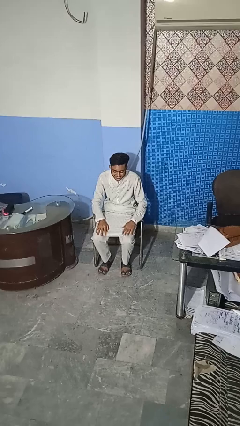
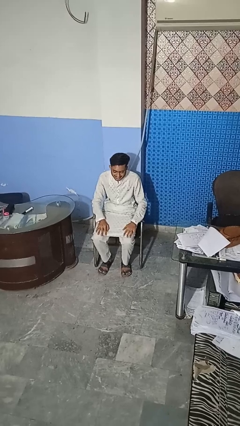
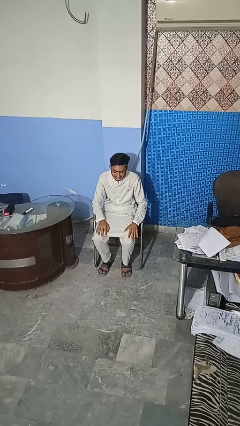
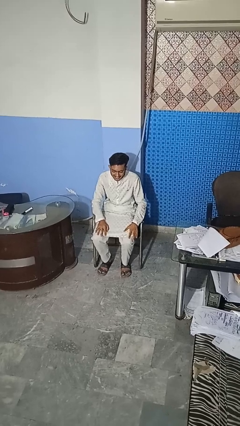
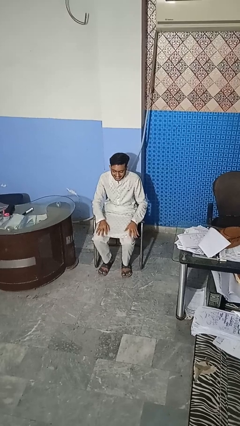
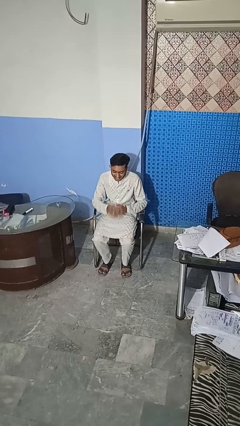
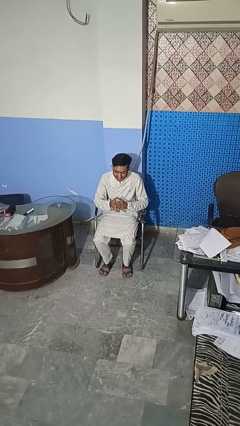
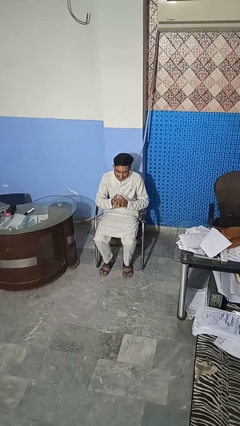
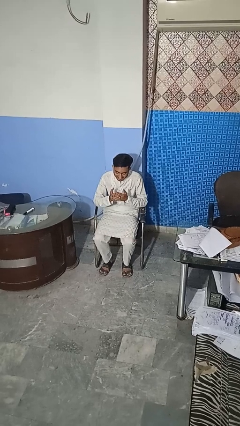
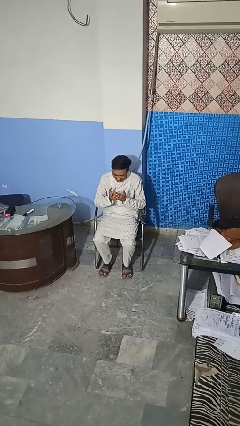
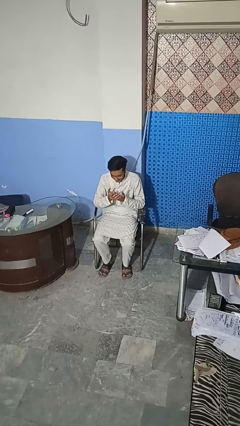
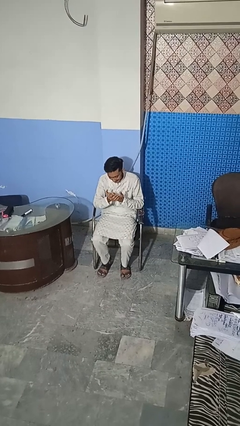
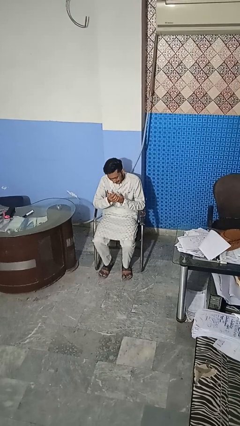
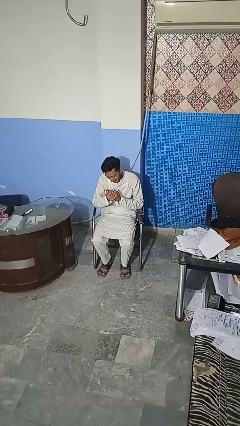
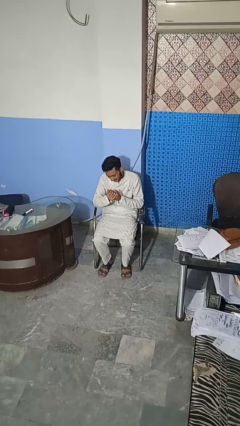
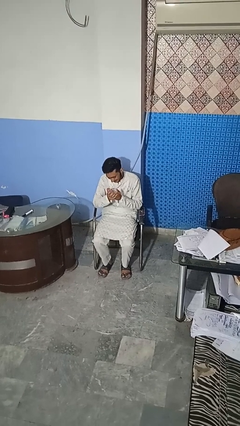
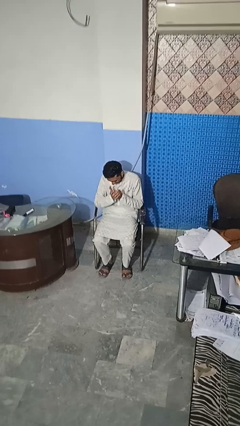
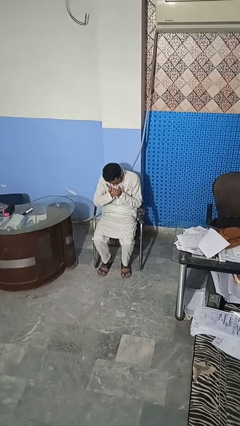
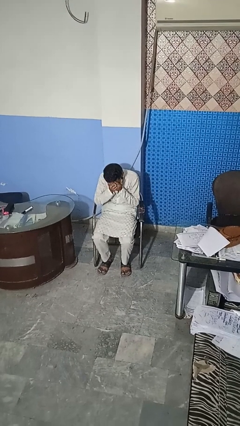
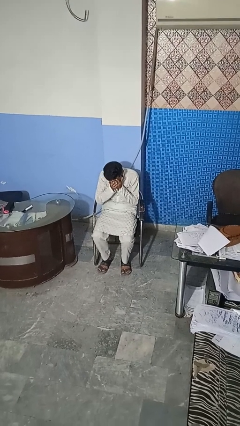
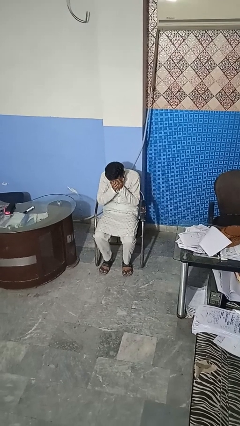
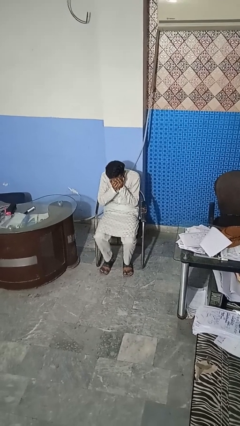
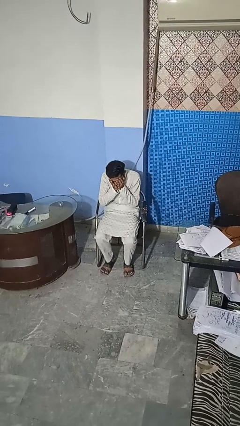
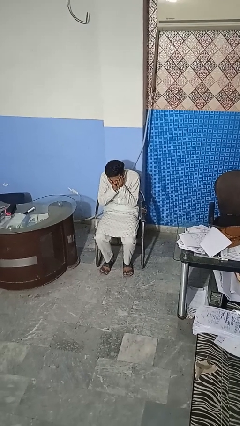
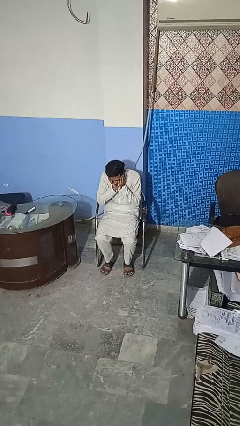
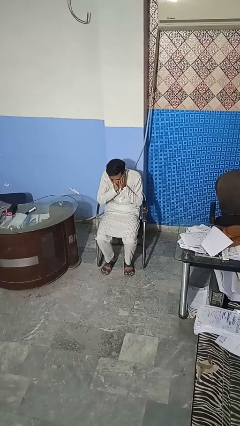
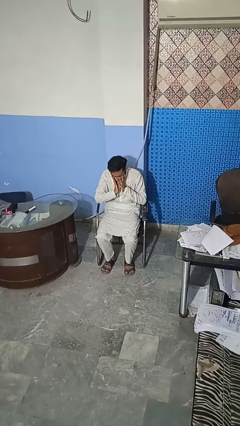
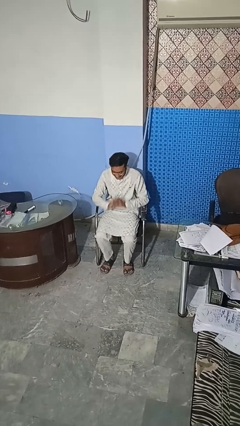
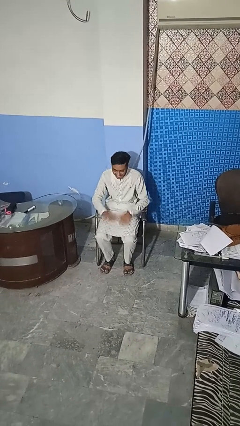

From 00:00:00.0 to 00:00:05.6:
person prays

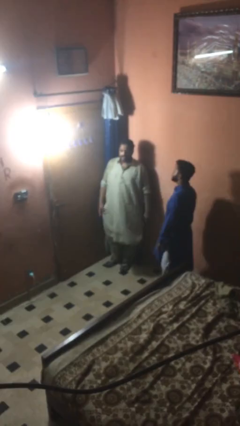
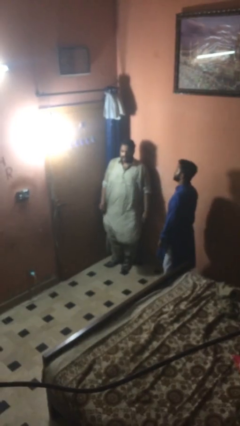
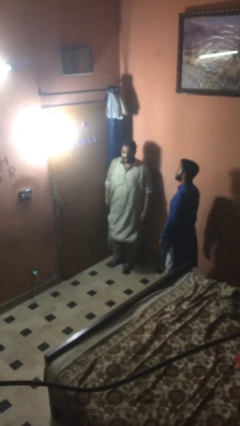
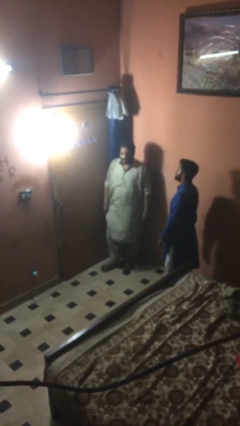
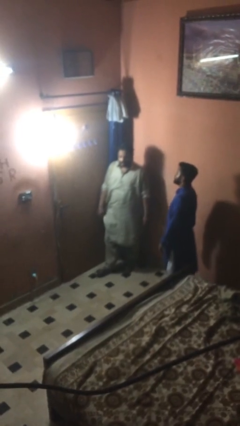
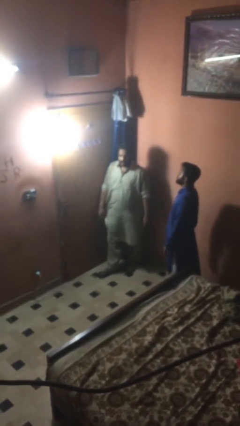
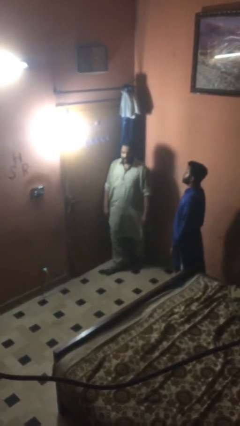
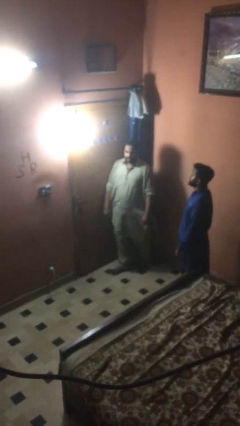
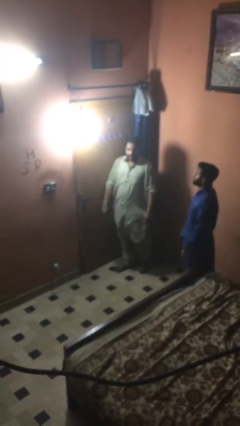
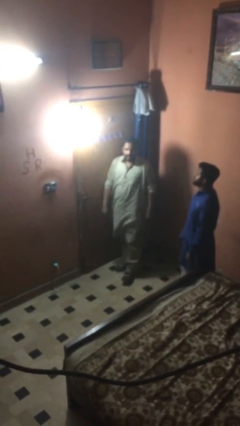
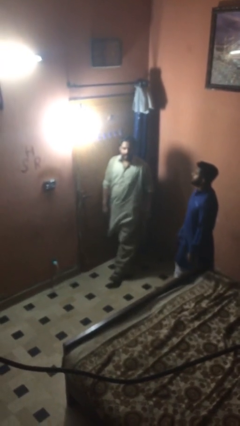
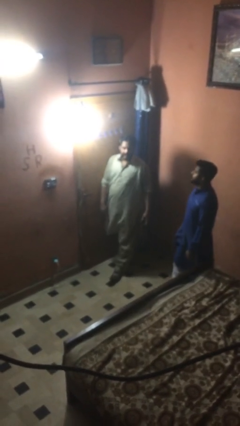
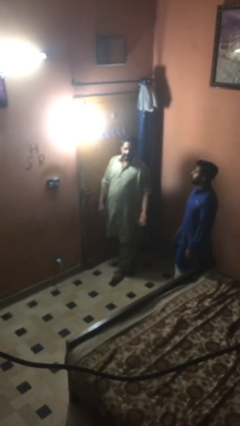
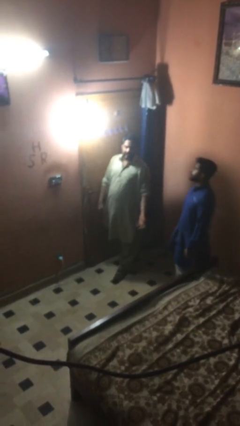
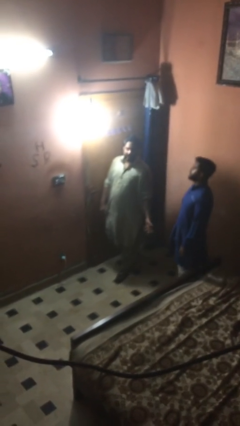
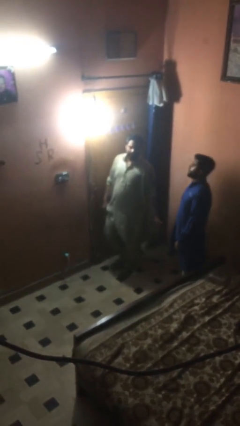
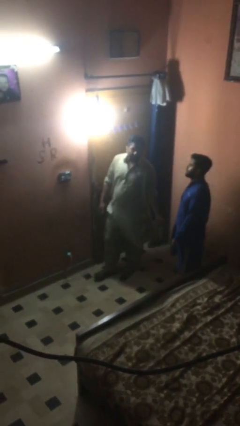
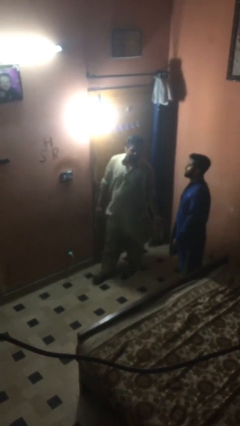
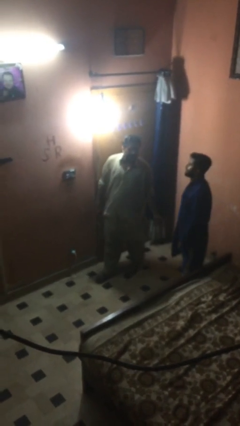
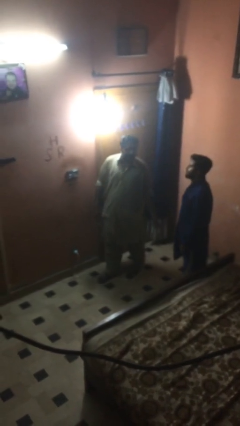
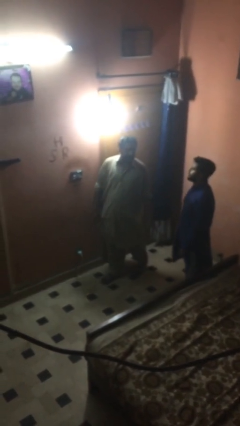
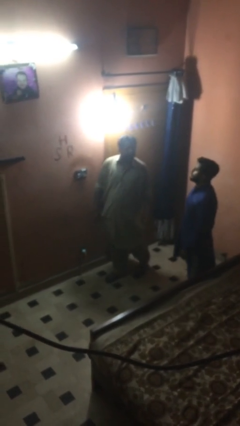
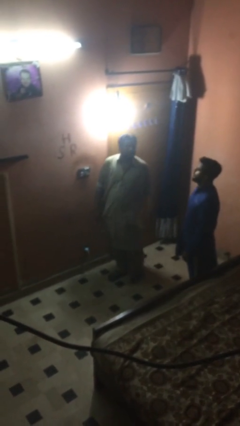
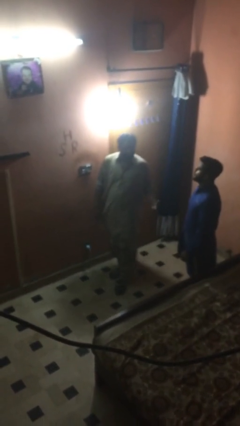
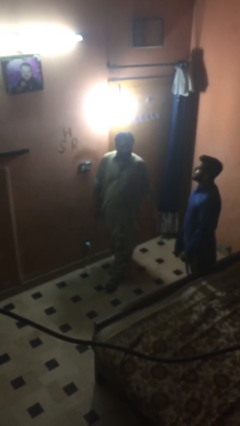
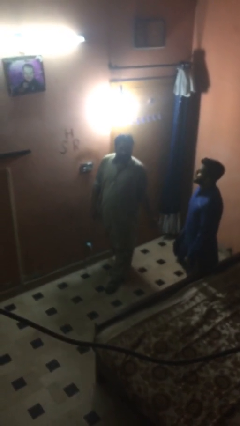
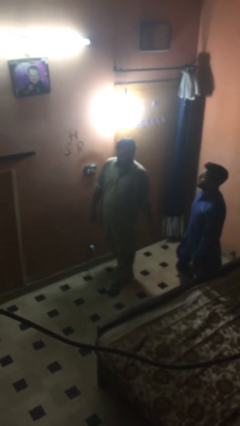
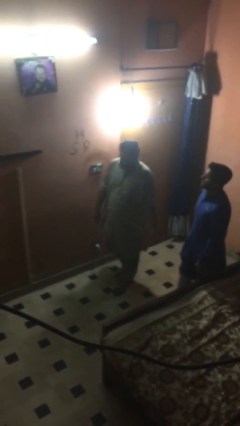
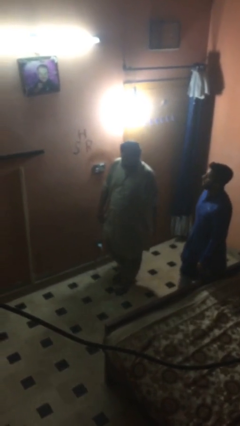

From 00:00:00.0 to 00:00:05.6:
person talks to person

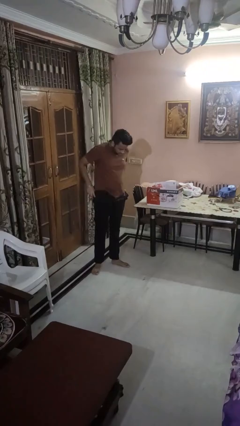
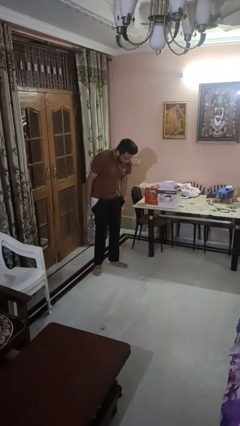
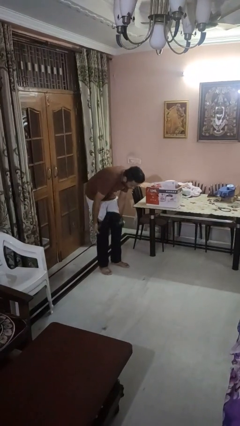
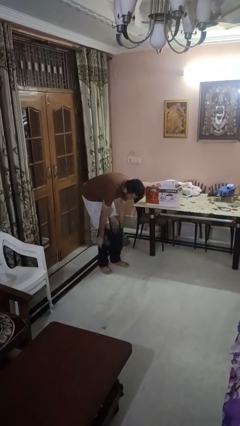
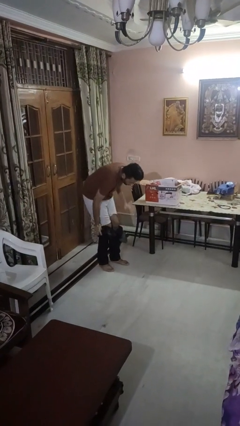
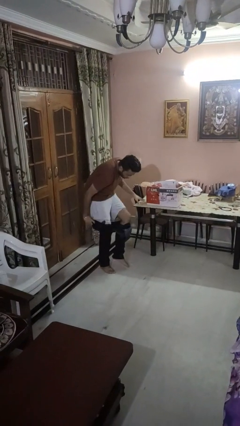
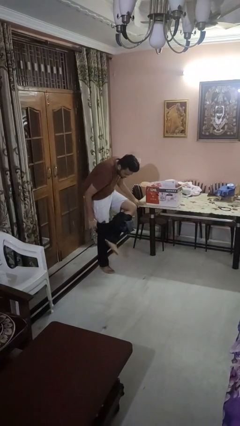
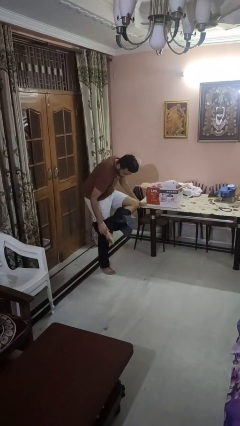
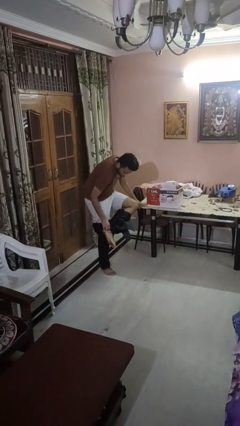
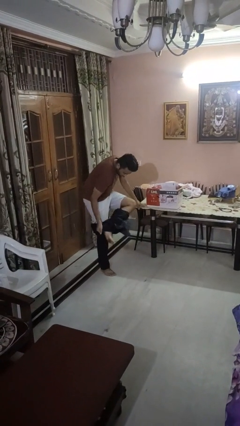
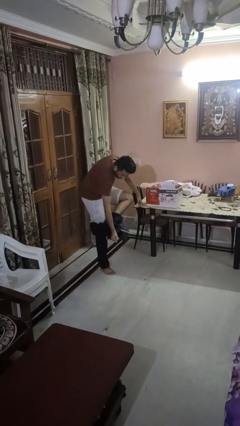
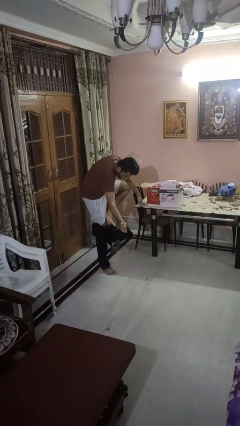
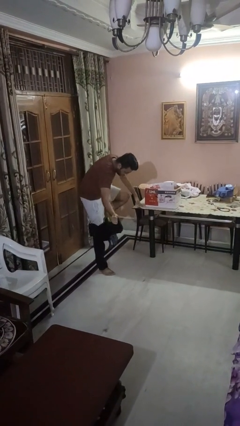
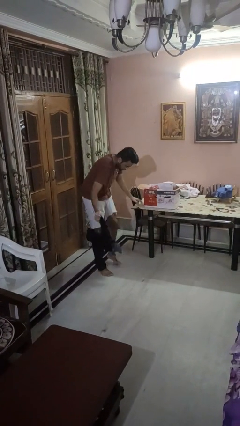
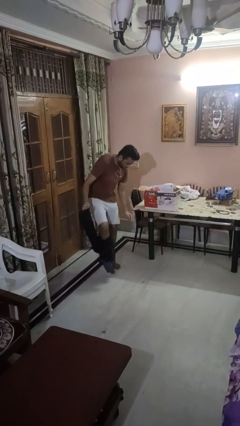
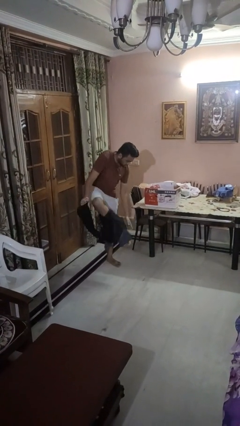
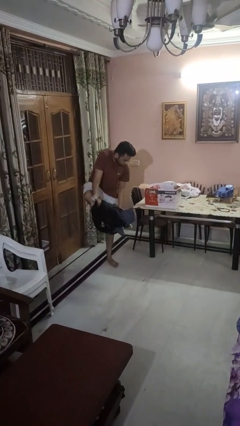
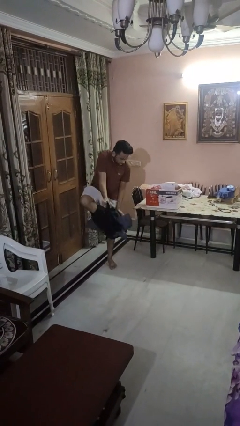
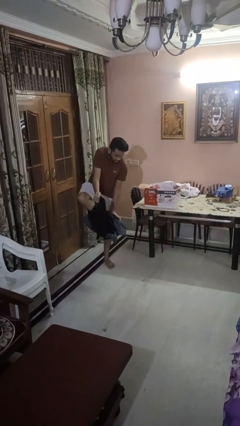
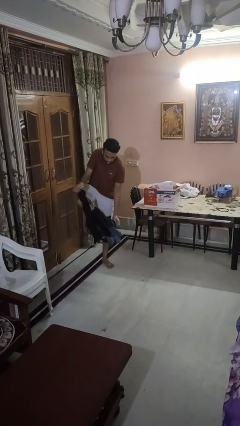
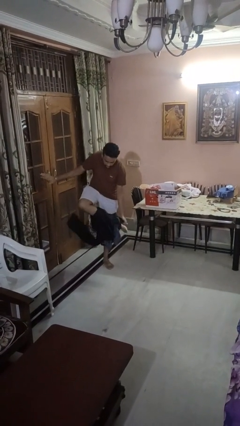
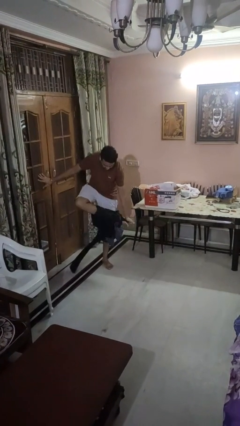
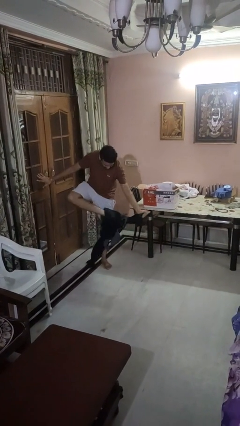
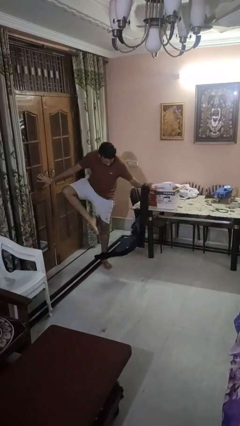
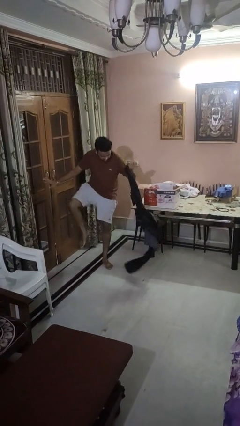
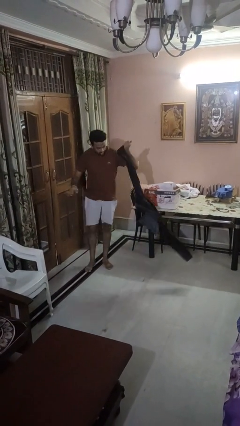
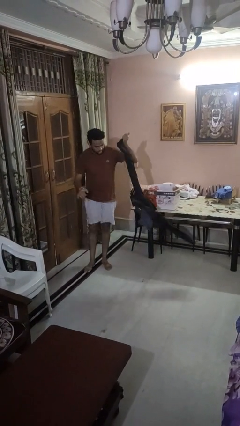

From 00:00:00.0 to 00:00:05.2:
person takes off pants

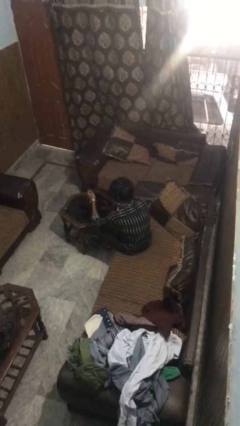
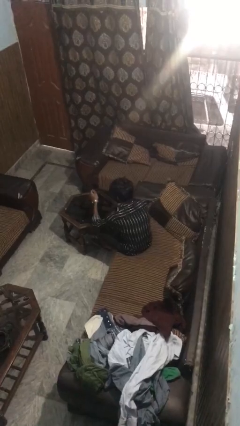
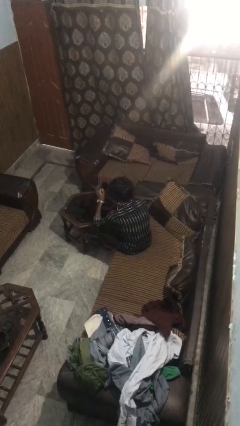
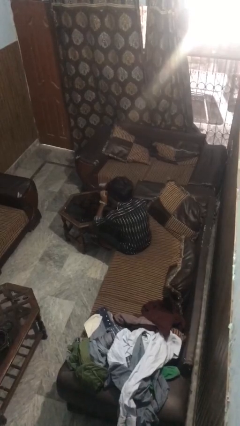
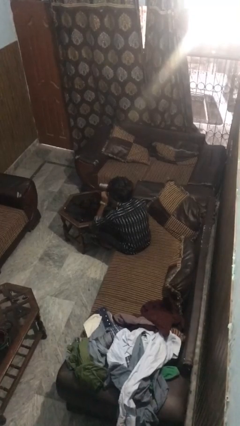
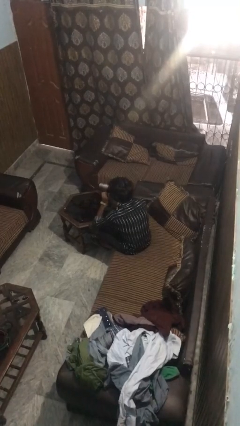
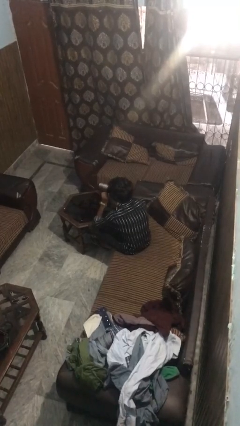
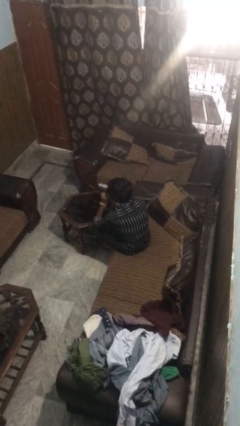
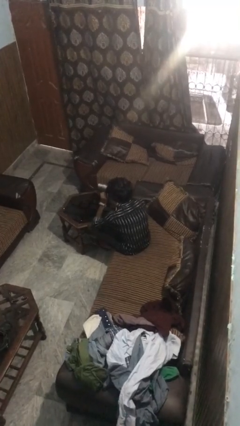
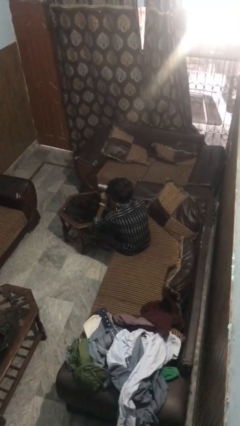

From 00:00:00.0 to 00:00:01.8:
person drinks from mug
